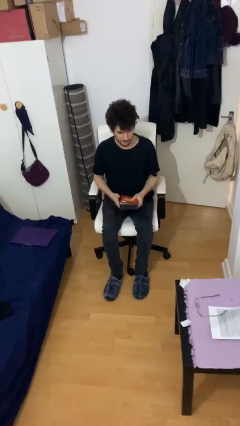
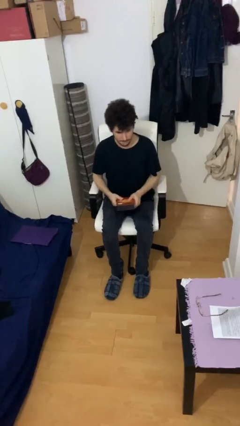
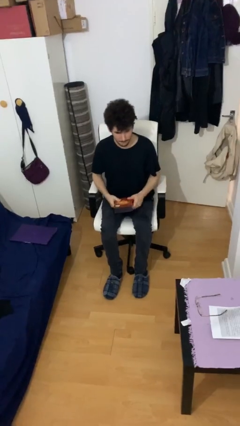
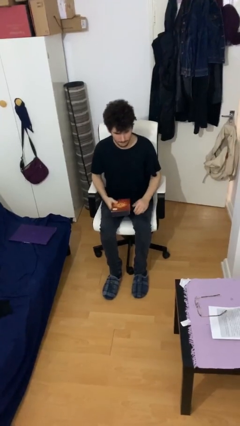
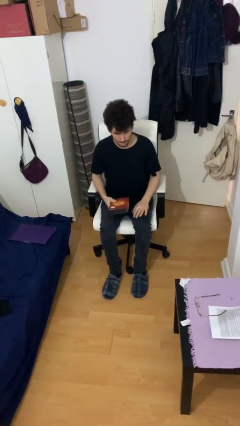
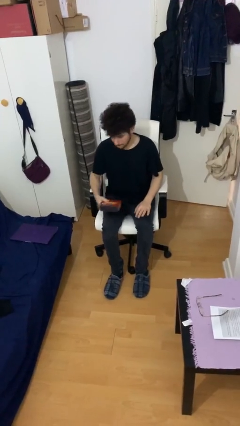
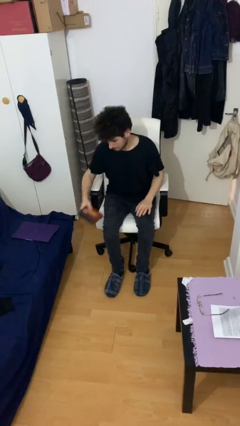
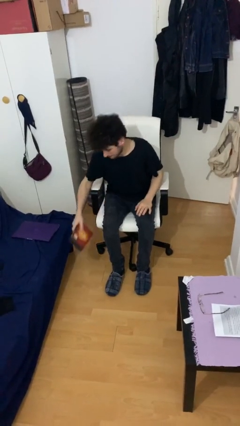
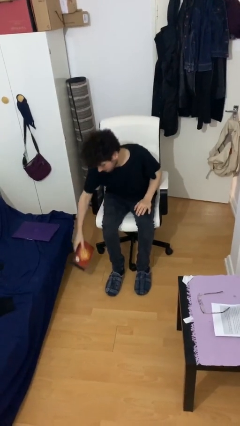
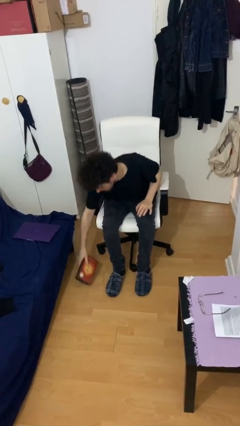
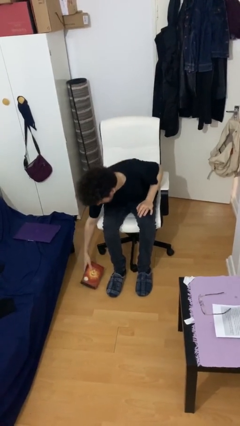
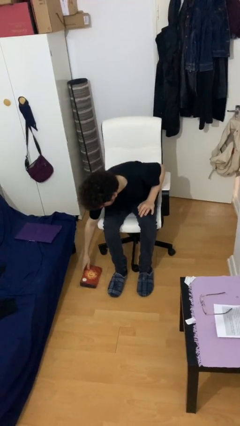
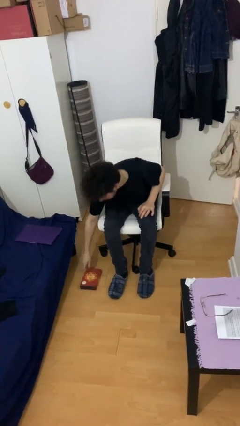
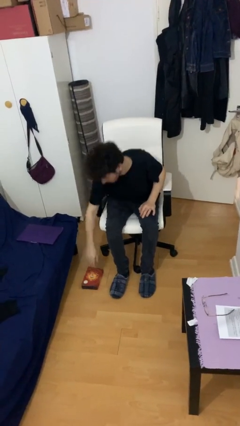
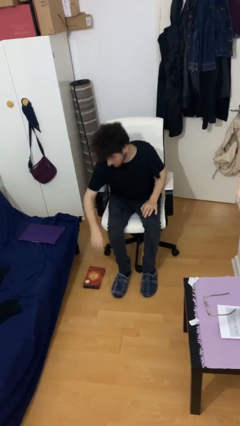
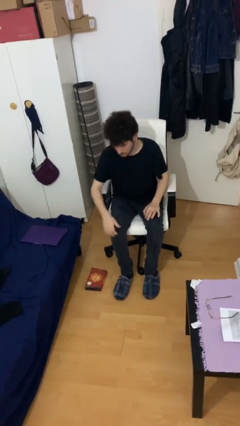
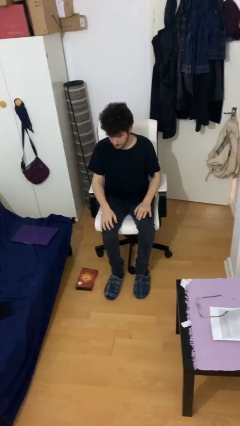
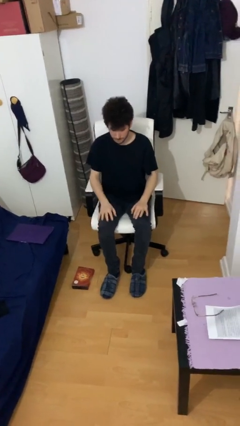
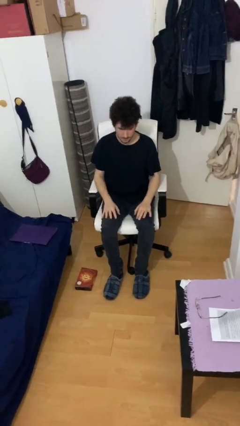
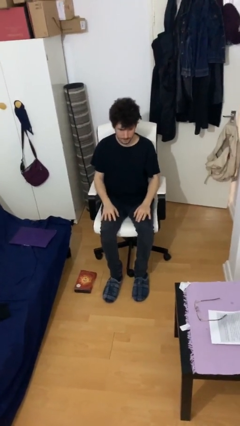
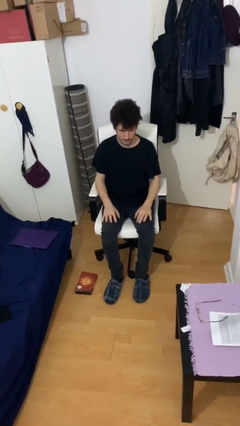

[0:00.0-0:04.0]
person puts down object on floor

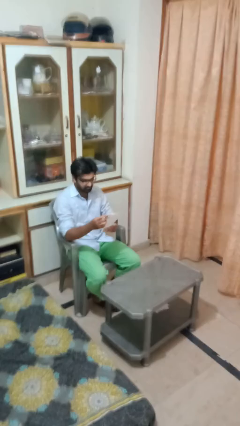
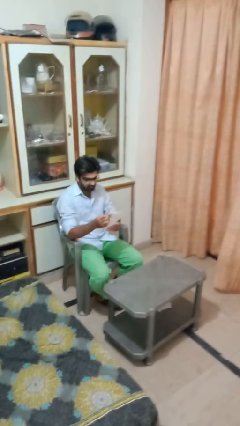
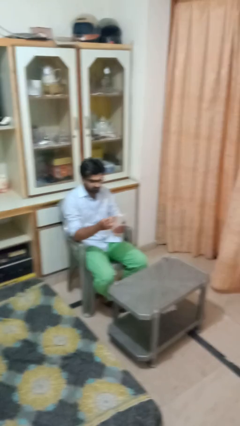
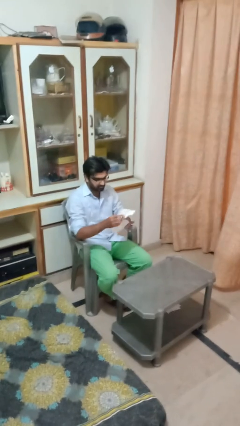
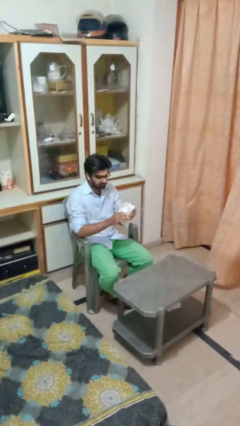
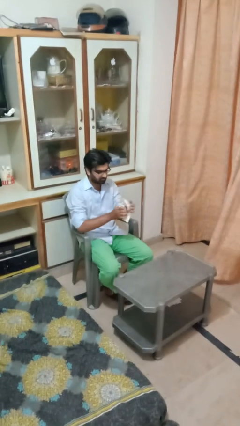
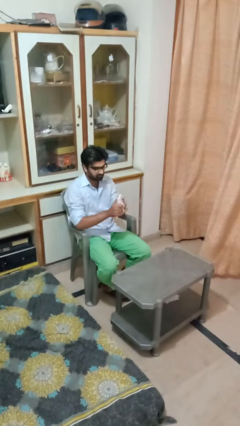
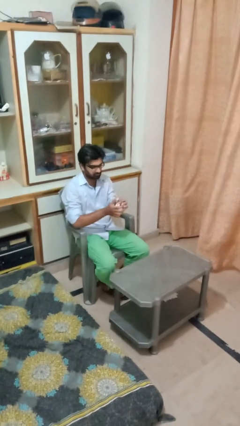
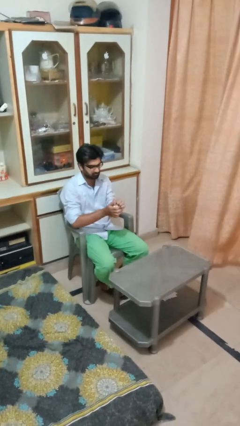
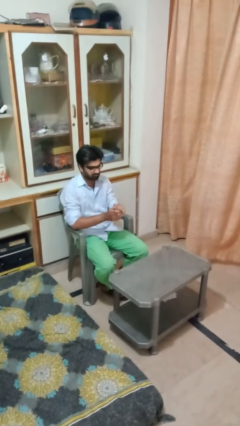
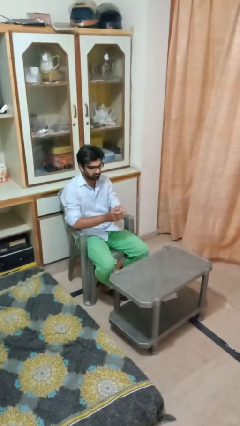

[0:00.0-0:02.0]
person crumples paper

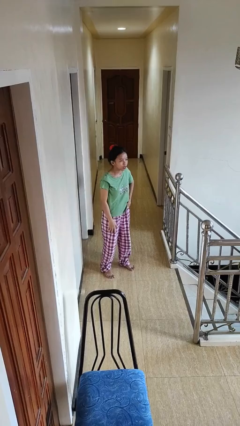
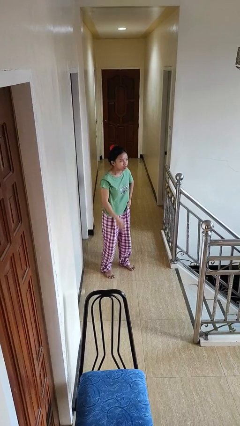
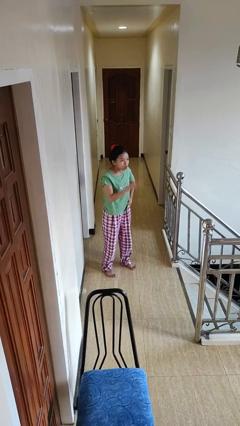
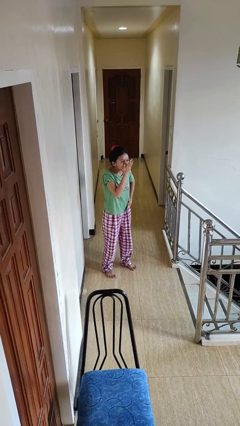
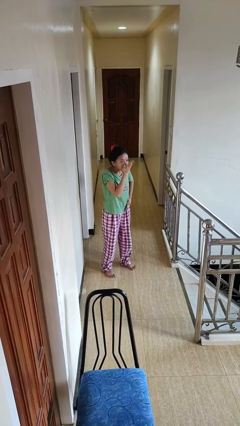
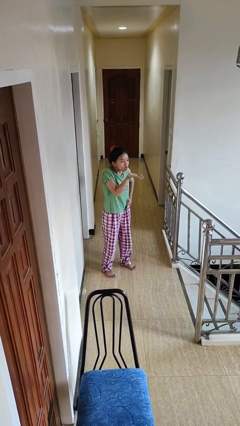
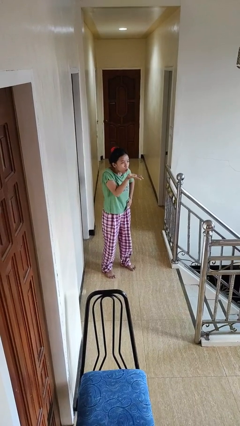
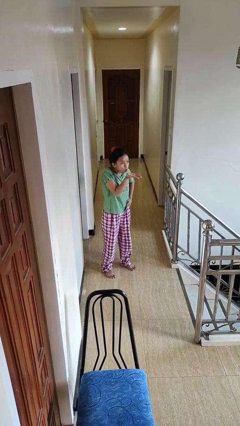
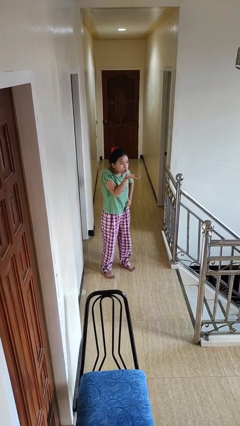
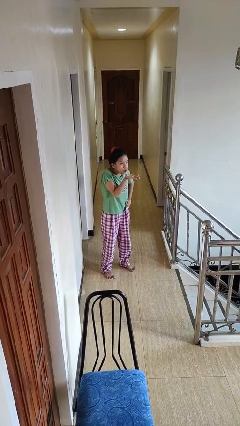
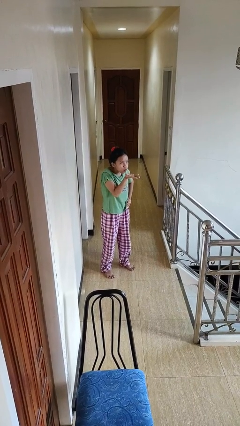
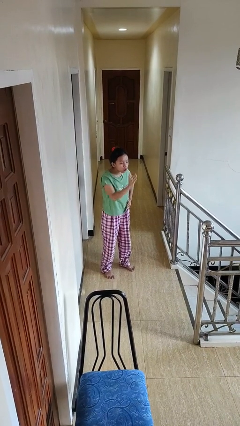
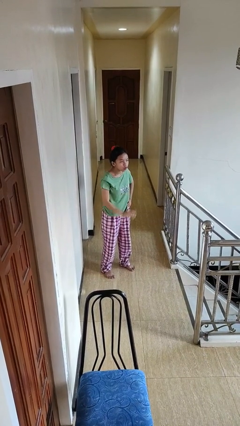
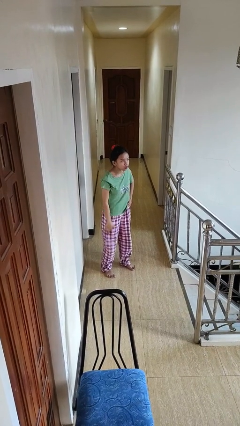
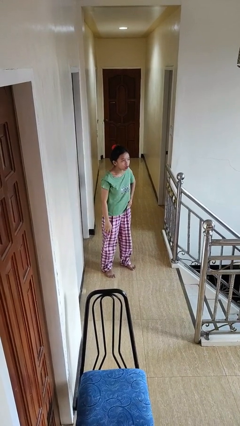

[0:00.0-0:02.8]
person gestures blow kiss

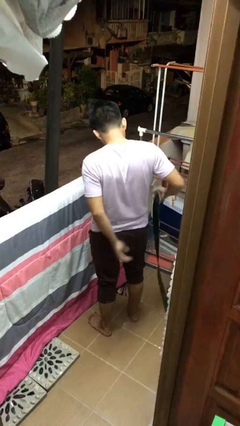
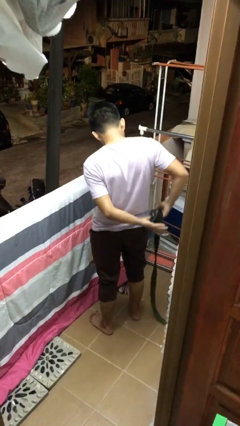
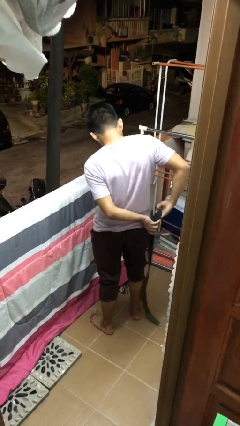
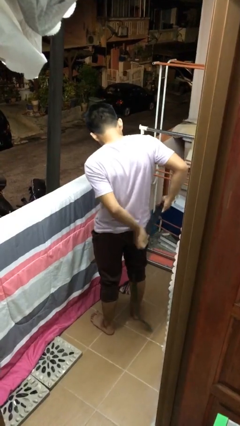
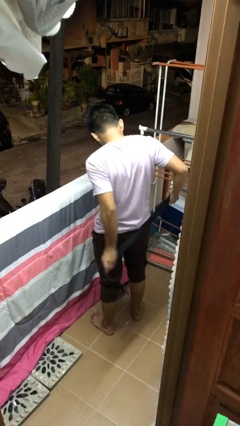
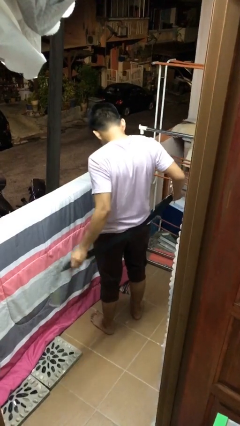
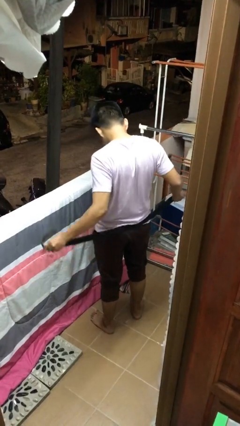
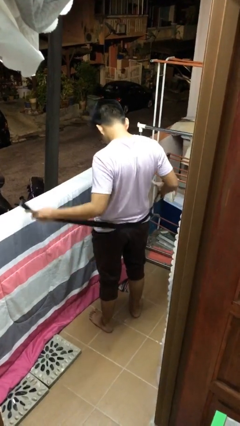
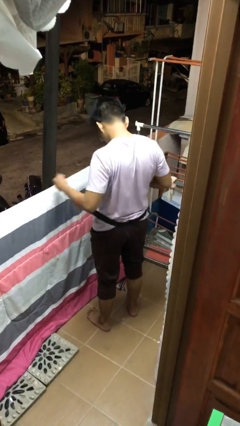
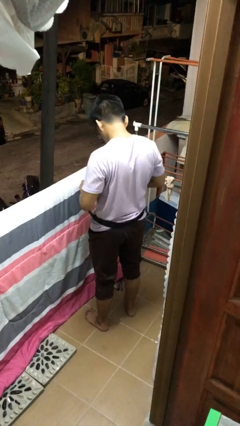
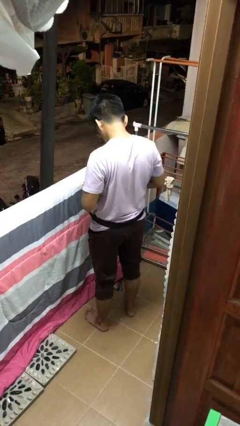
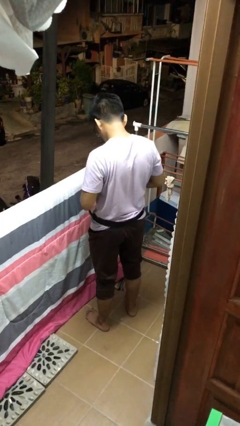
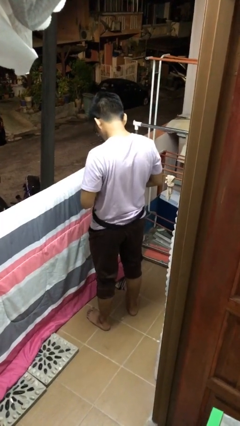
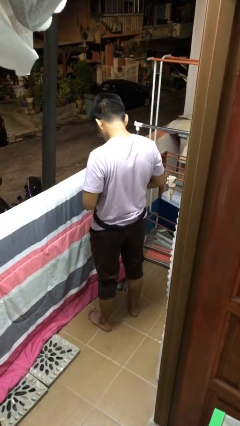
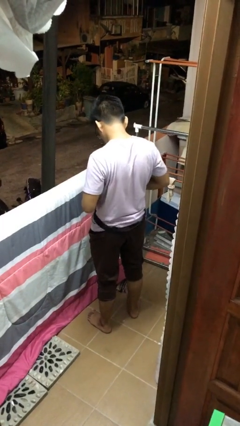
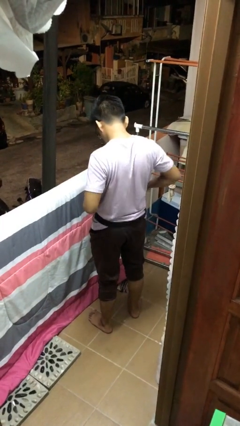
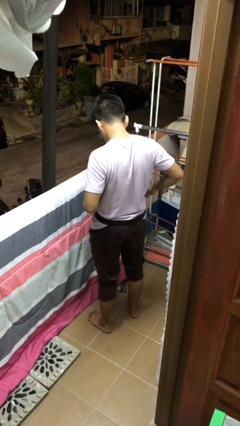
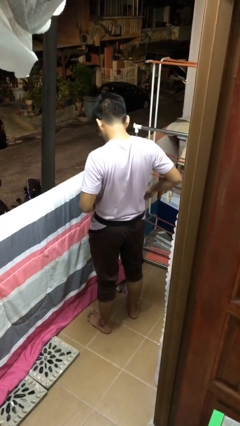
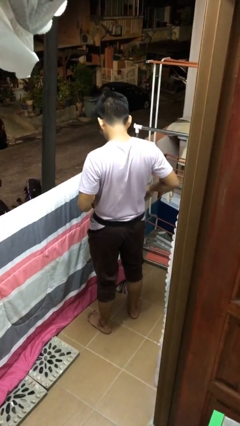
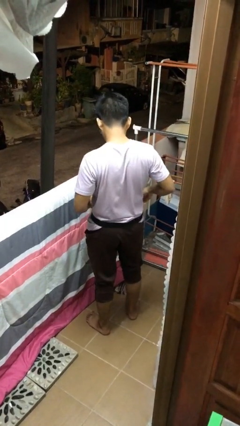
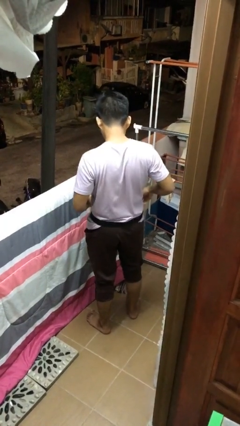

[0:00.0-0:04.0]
person puts on belt

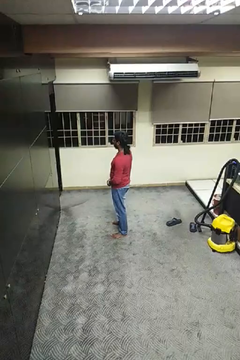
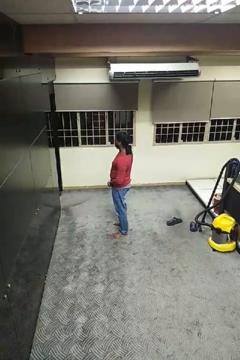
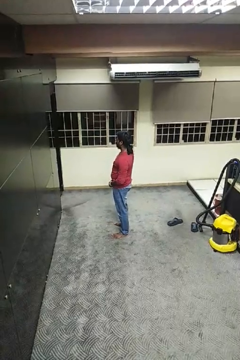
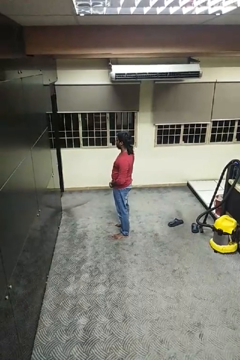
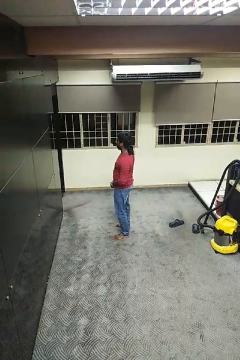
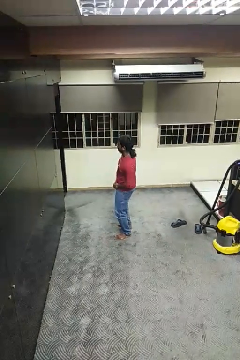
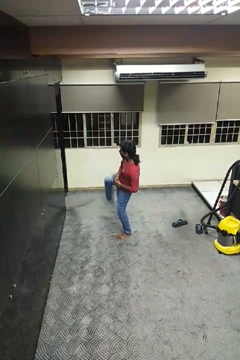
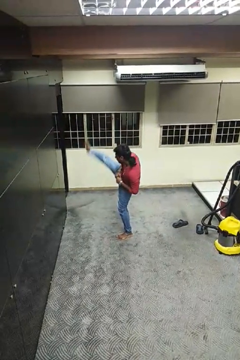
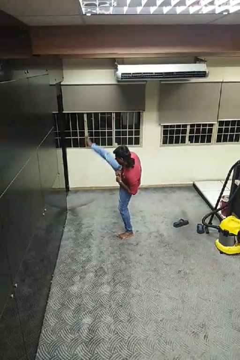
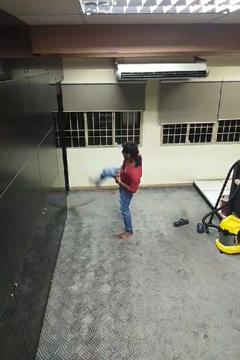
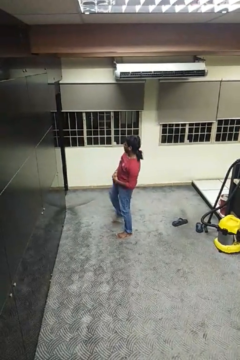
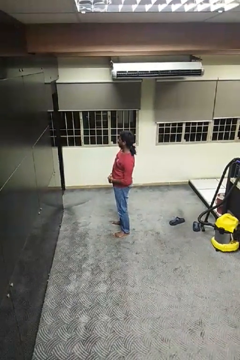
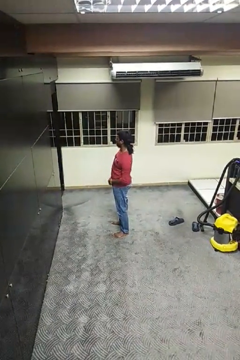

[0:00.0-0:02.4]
person karate kicks

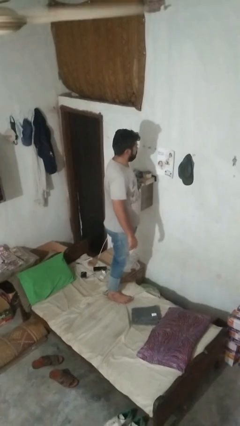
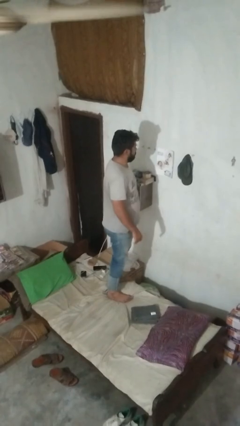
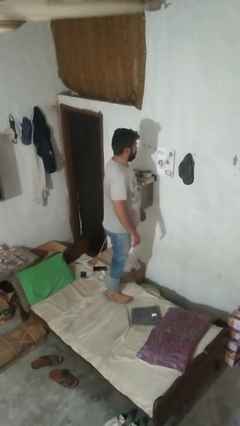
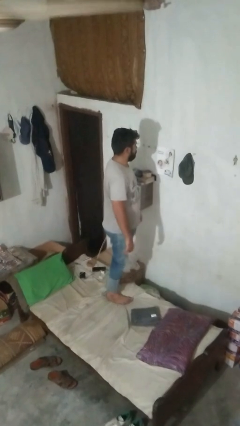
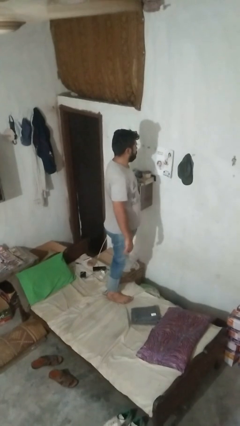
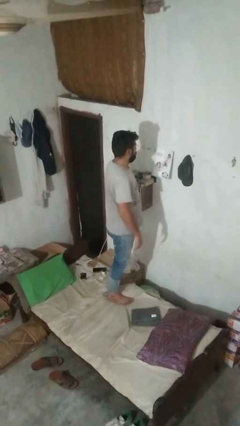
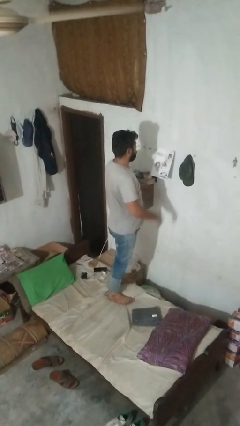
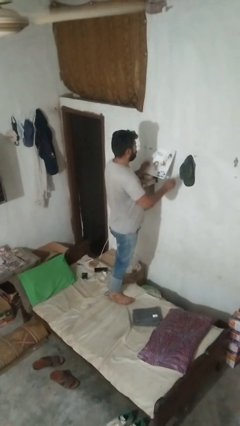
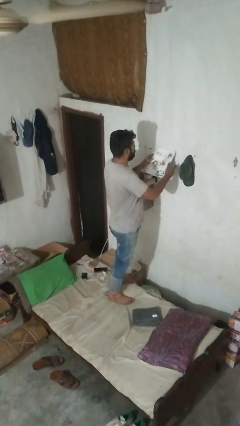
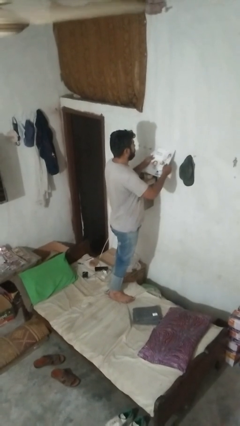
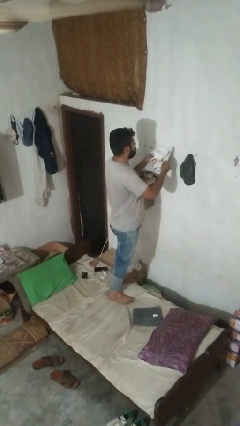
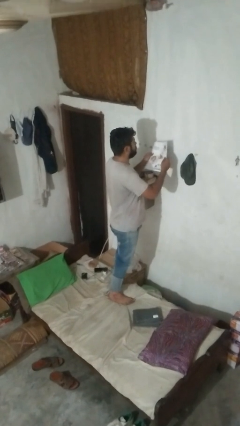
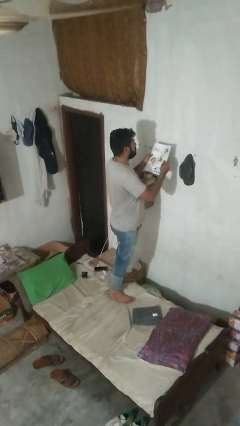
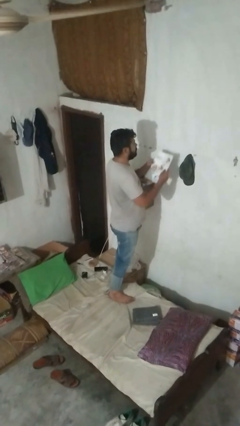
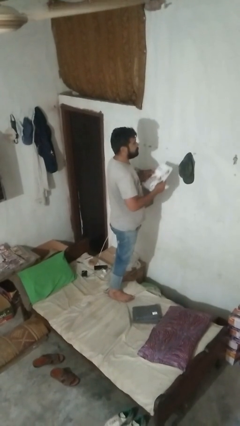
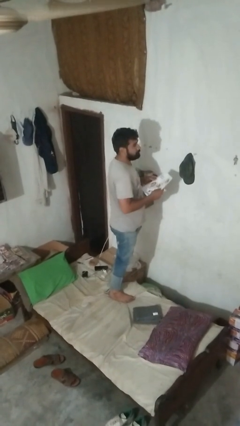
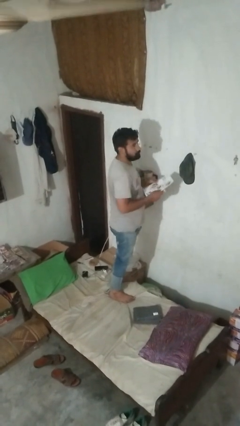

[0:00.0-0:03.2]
person takes down picture frame
